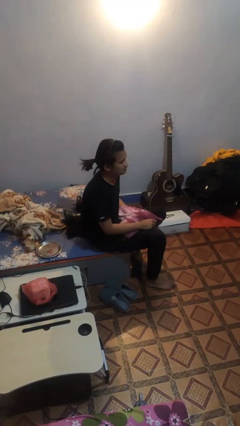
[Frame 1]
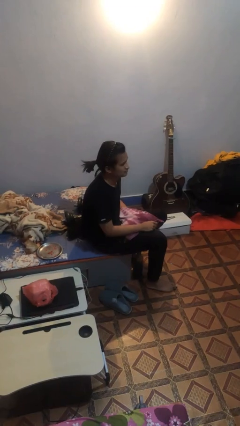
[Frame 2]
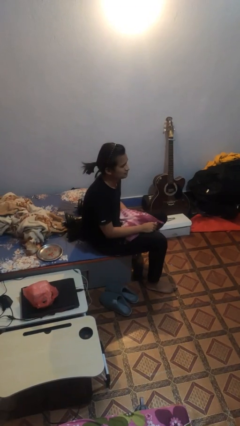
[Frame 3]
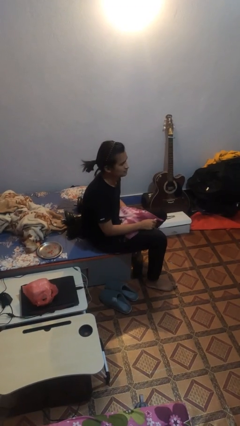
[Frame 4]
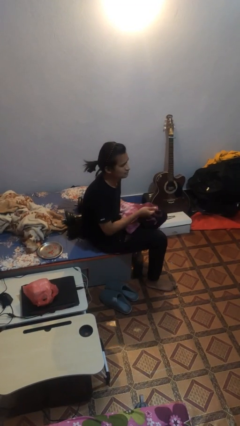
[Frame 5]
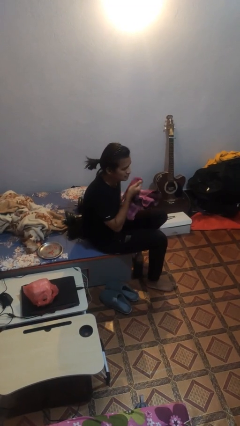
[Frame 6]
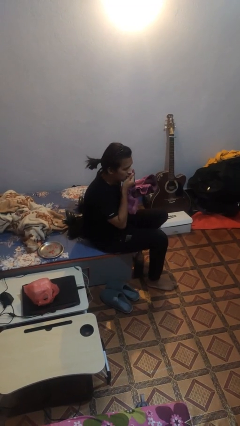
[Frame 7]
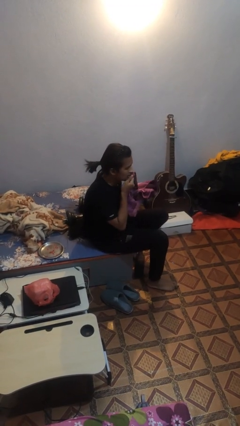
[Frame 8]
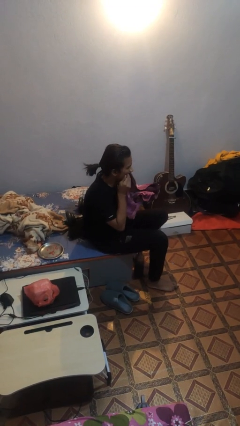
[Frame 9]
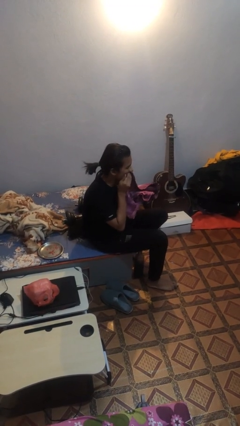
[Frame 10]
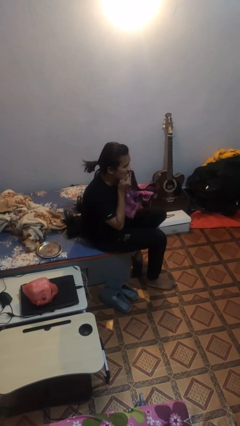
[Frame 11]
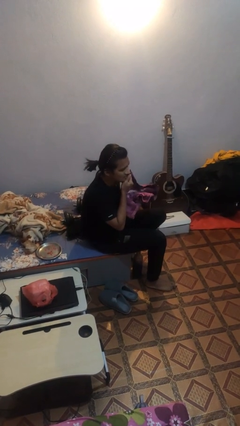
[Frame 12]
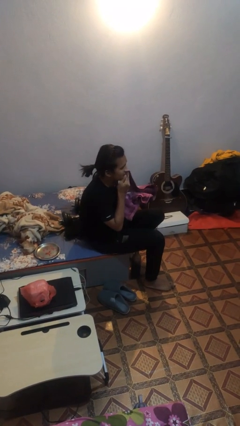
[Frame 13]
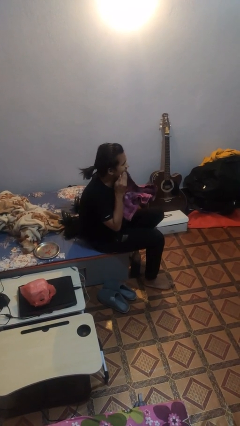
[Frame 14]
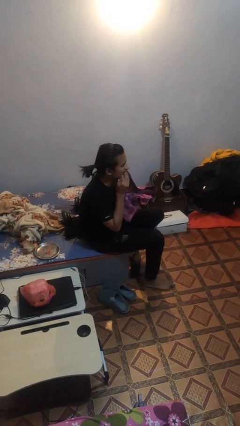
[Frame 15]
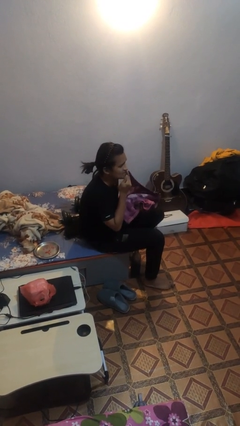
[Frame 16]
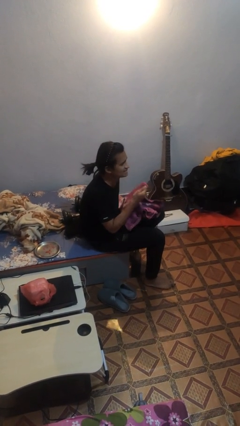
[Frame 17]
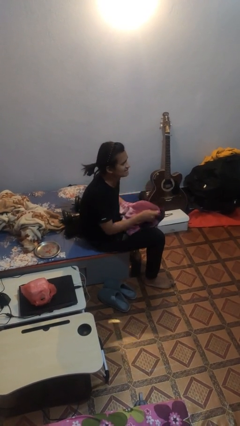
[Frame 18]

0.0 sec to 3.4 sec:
person wipes mouth with napkin

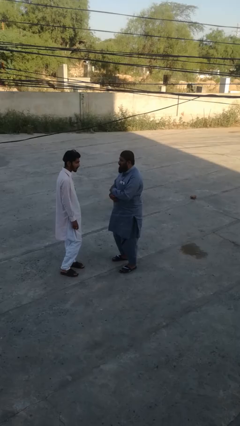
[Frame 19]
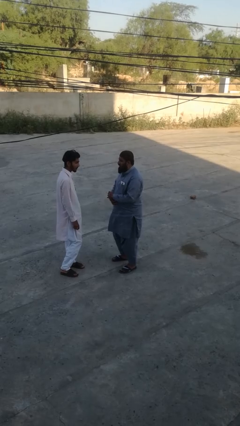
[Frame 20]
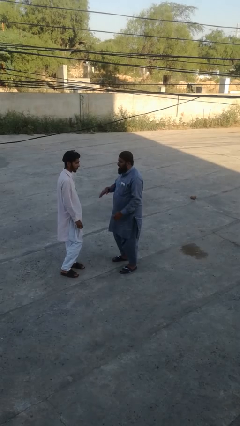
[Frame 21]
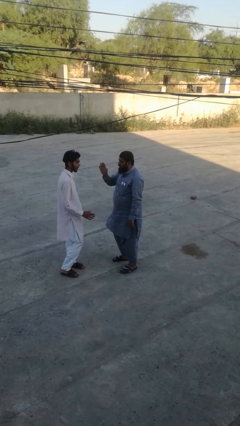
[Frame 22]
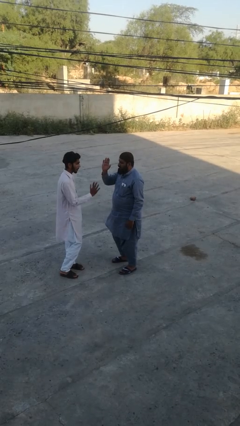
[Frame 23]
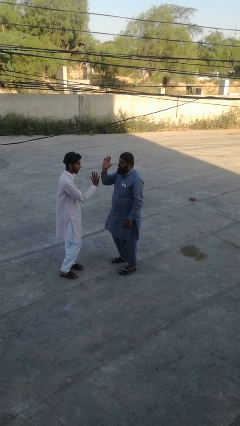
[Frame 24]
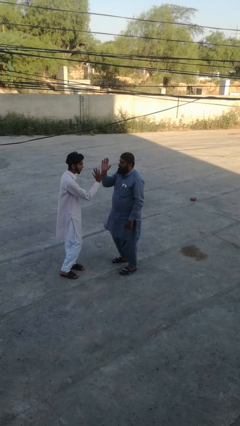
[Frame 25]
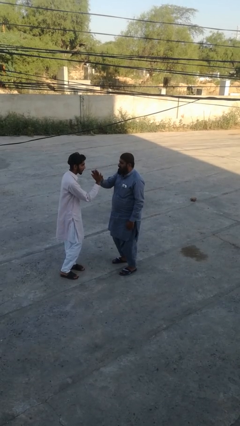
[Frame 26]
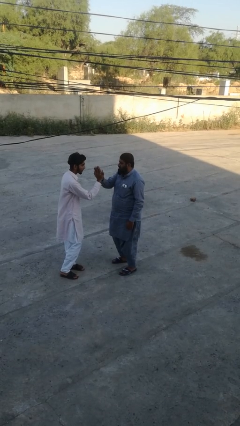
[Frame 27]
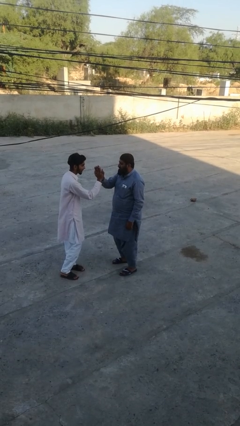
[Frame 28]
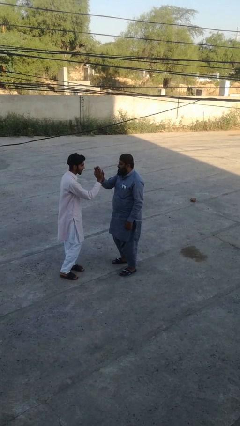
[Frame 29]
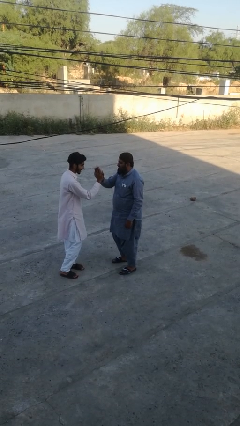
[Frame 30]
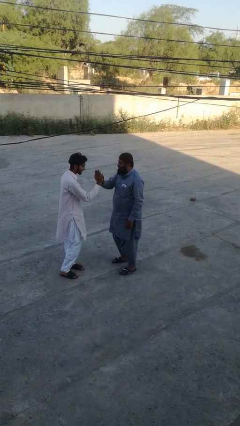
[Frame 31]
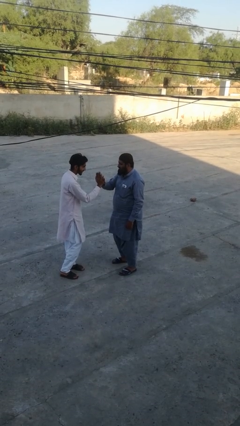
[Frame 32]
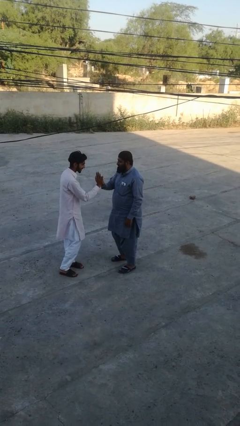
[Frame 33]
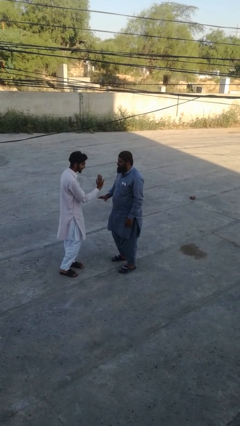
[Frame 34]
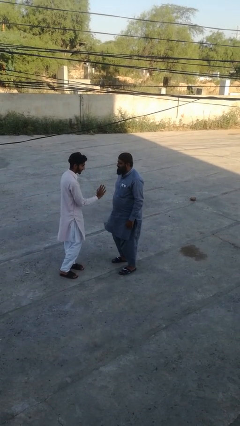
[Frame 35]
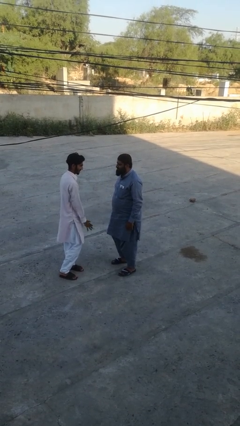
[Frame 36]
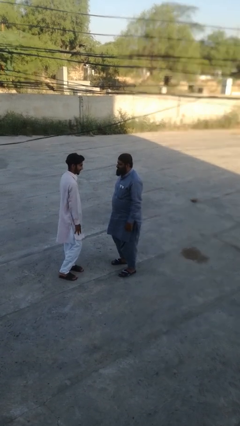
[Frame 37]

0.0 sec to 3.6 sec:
person highfives hand

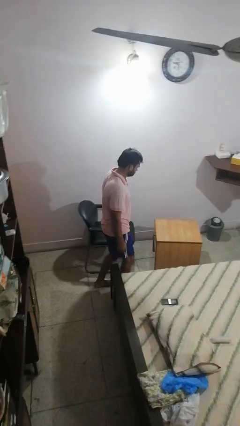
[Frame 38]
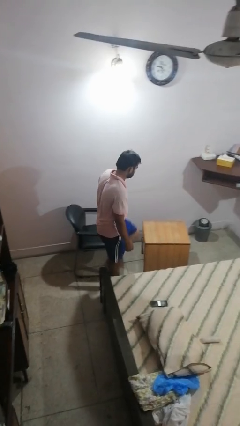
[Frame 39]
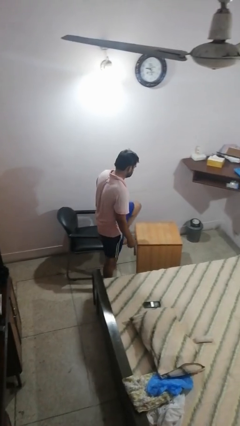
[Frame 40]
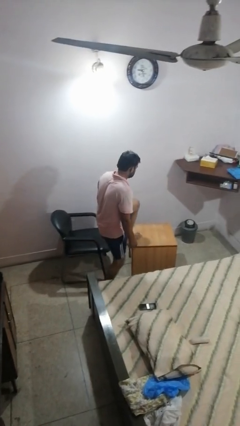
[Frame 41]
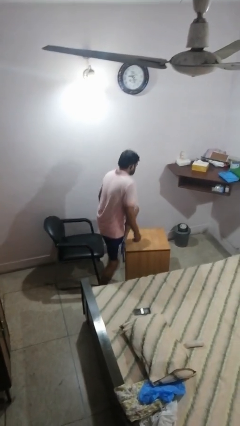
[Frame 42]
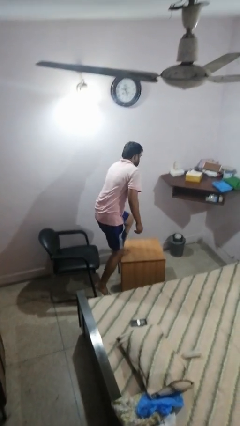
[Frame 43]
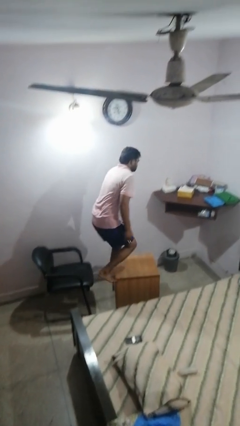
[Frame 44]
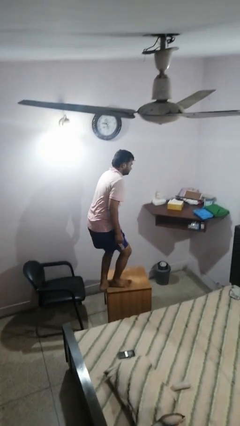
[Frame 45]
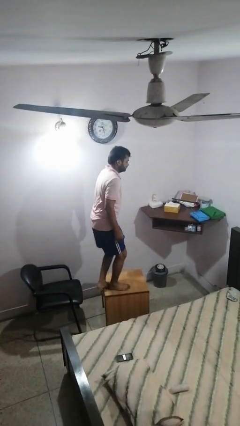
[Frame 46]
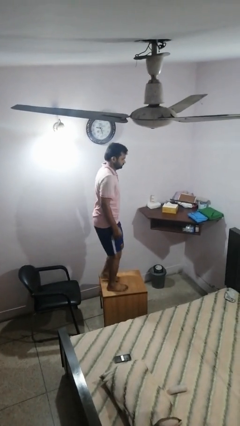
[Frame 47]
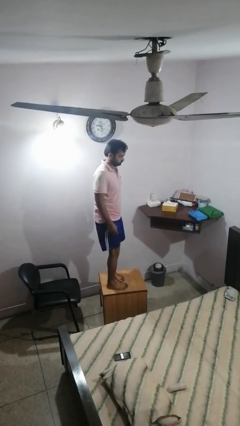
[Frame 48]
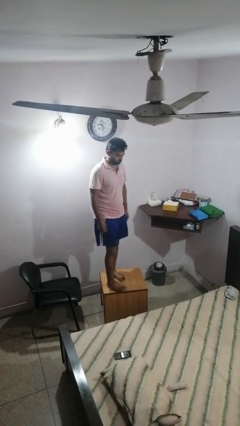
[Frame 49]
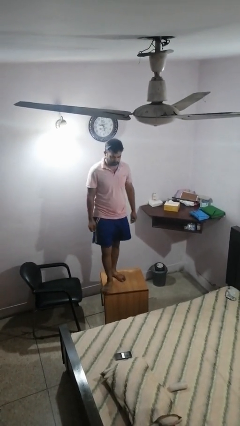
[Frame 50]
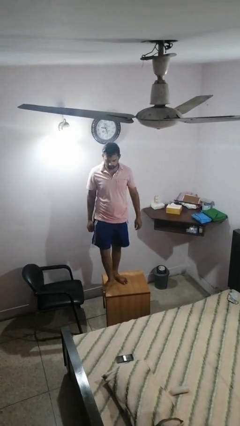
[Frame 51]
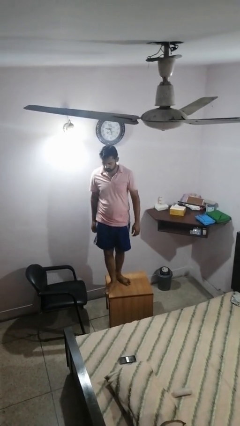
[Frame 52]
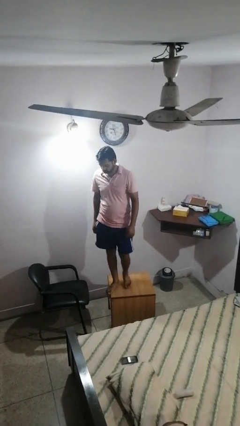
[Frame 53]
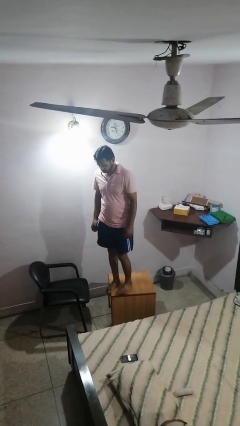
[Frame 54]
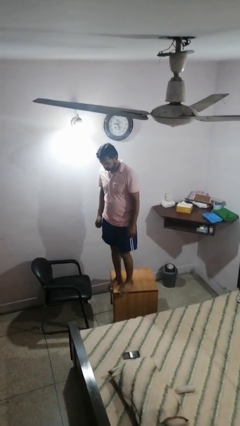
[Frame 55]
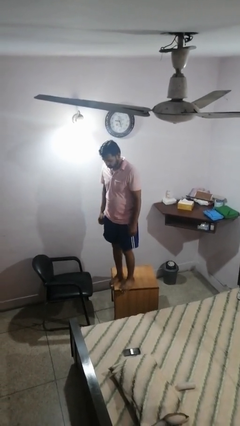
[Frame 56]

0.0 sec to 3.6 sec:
person climbs on table

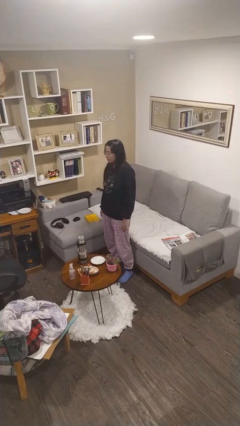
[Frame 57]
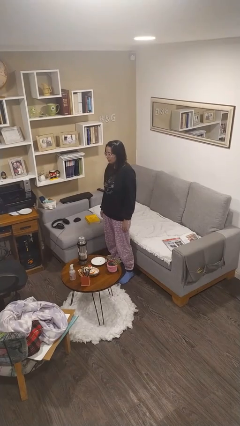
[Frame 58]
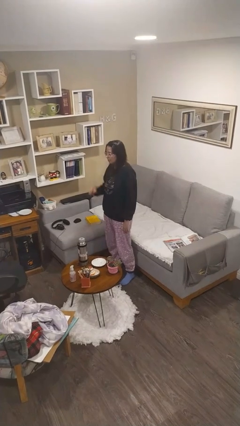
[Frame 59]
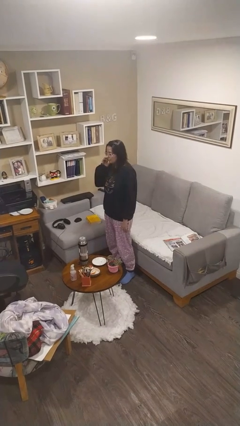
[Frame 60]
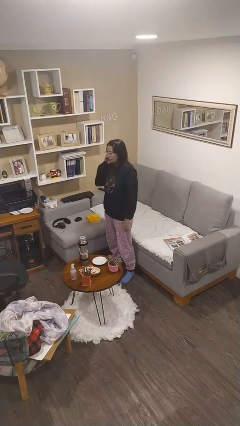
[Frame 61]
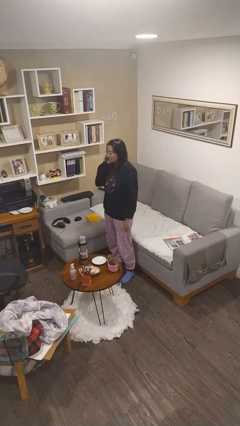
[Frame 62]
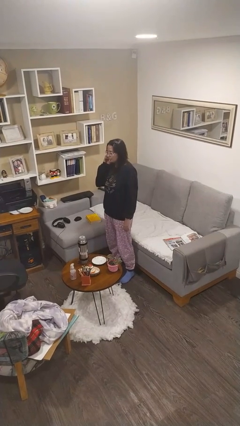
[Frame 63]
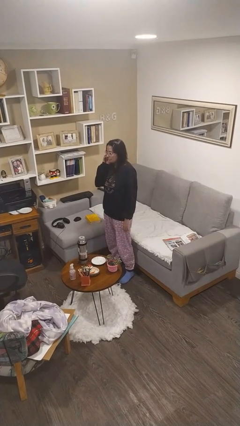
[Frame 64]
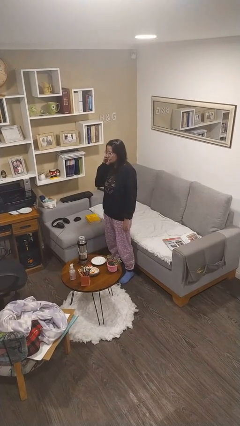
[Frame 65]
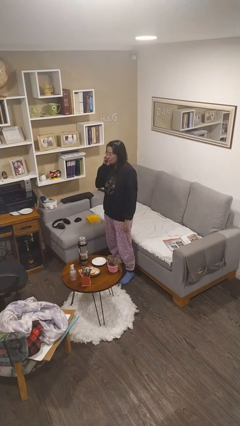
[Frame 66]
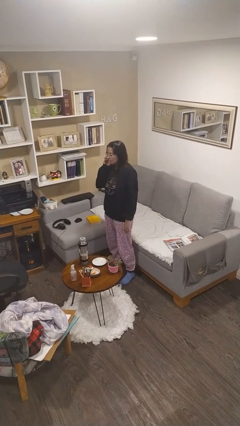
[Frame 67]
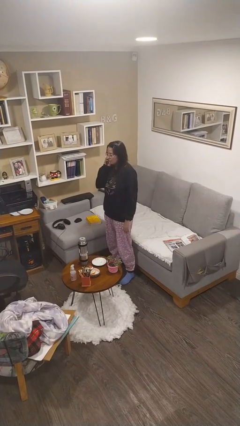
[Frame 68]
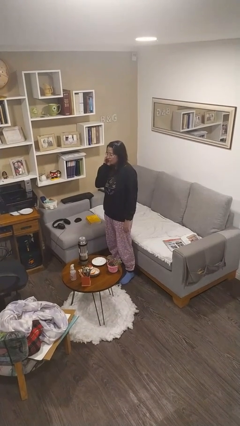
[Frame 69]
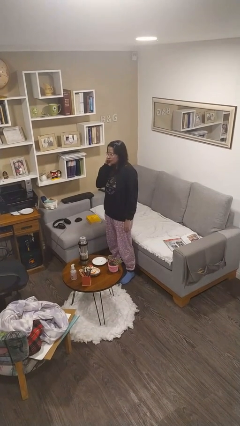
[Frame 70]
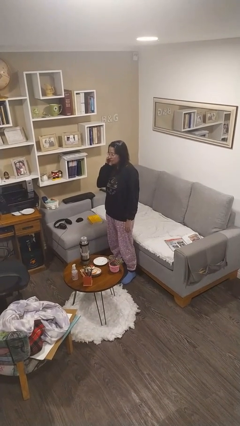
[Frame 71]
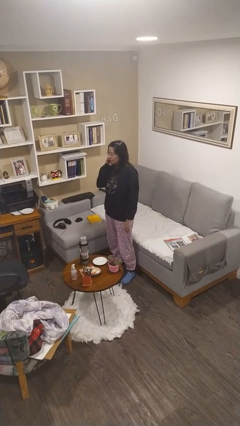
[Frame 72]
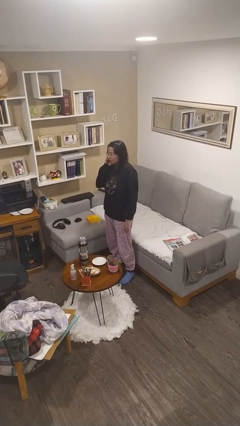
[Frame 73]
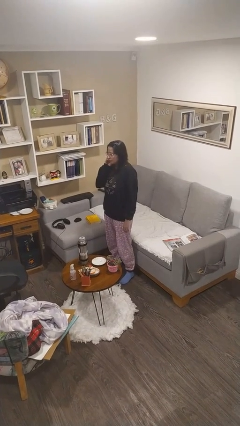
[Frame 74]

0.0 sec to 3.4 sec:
person scratches face

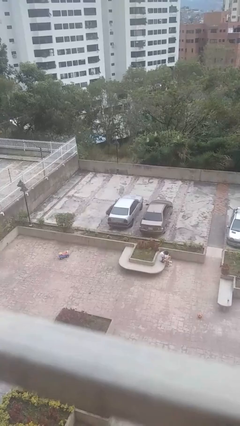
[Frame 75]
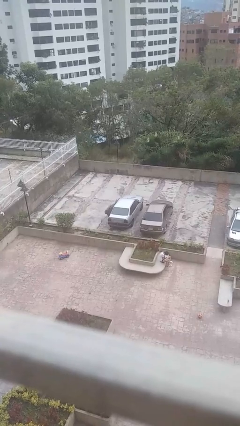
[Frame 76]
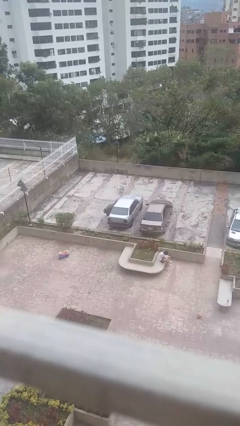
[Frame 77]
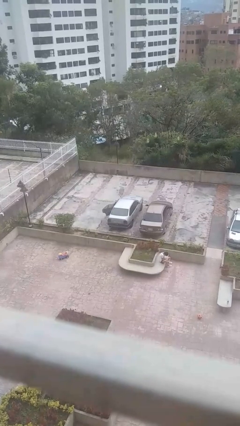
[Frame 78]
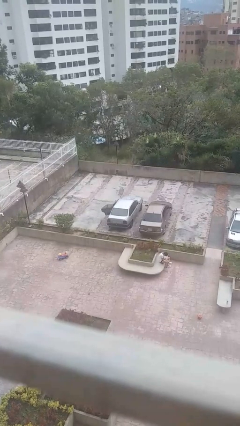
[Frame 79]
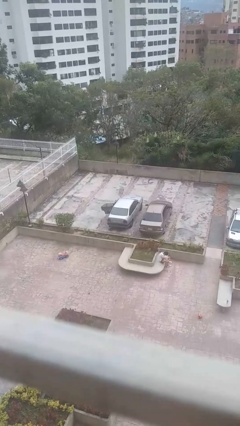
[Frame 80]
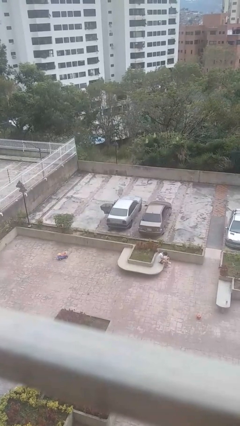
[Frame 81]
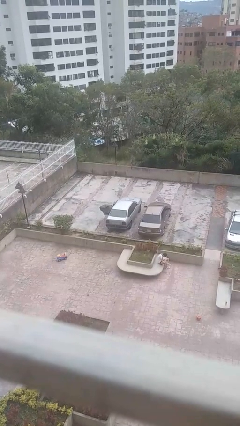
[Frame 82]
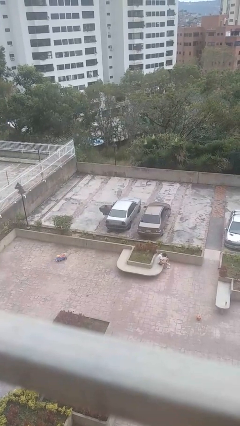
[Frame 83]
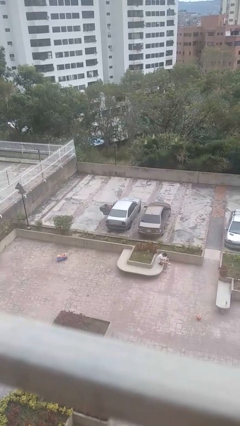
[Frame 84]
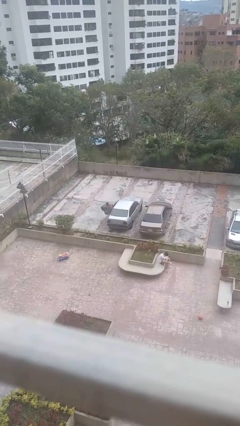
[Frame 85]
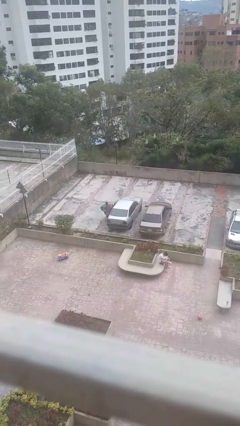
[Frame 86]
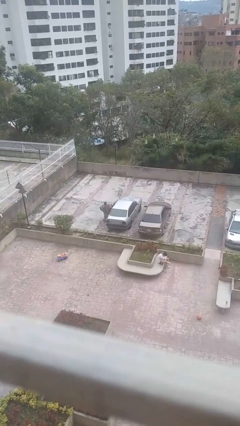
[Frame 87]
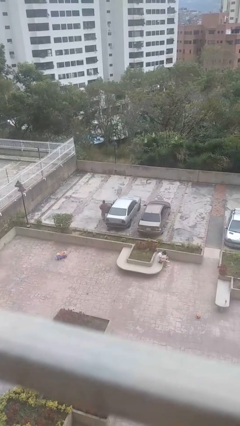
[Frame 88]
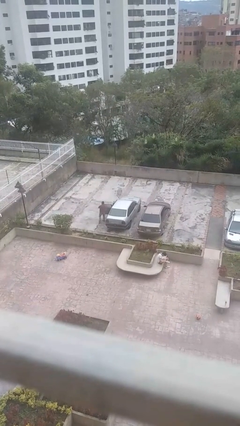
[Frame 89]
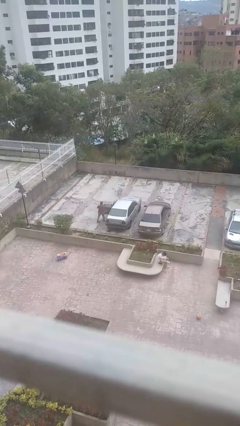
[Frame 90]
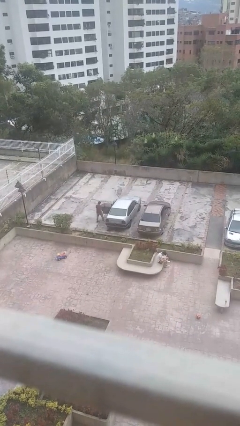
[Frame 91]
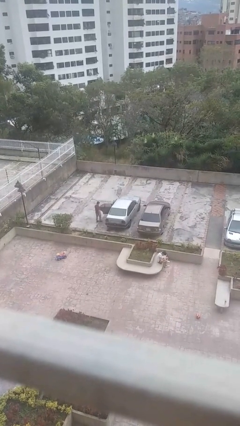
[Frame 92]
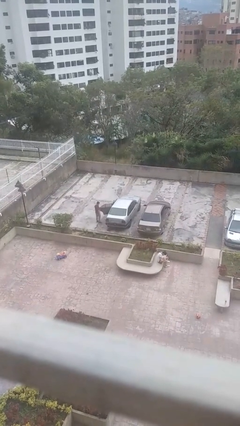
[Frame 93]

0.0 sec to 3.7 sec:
car drops off person
